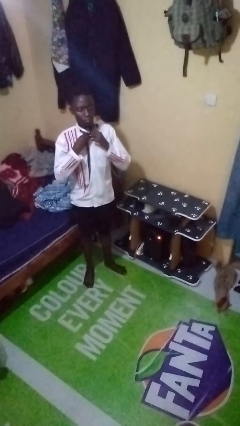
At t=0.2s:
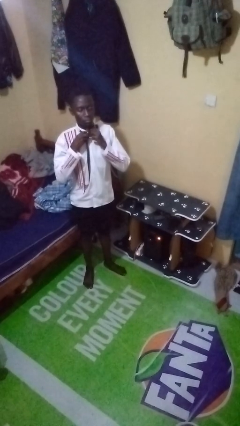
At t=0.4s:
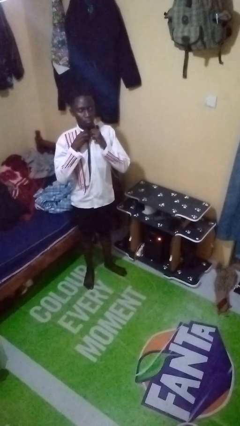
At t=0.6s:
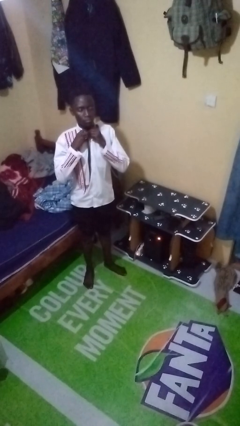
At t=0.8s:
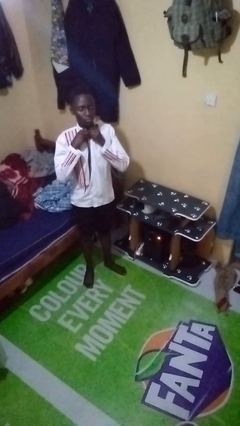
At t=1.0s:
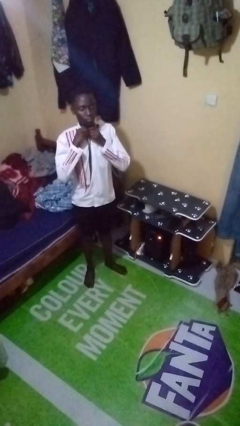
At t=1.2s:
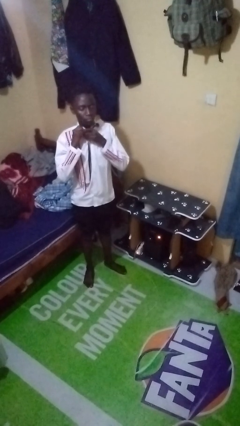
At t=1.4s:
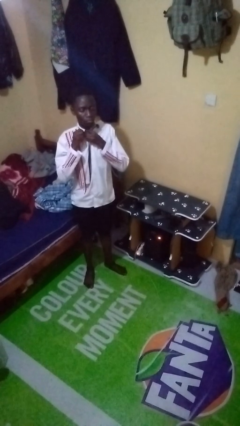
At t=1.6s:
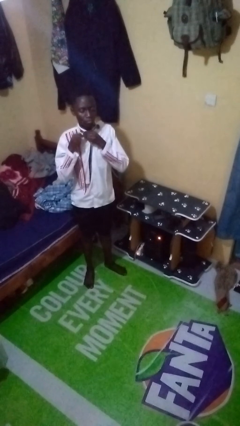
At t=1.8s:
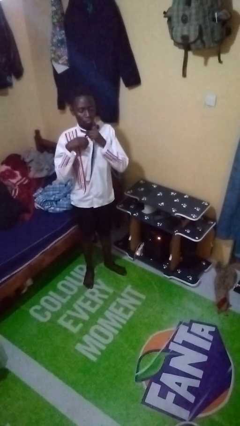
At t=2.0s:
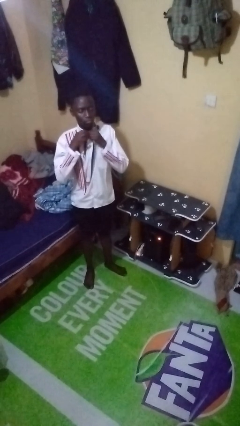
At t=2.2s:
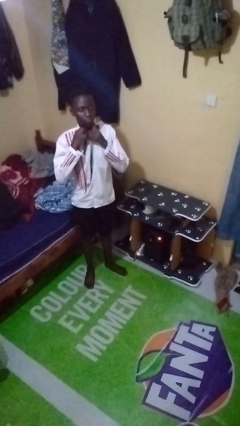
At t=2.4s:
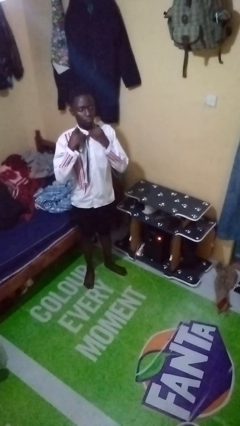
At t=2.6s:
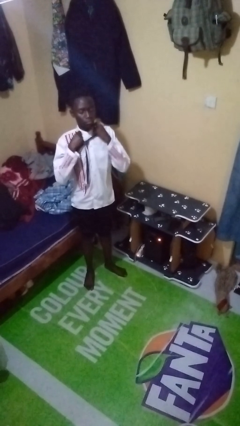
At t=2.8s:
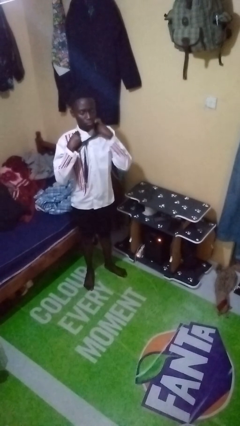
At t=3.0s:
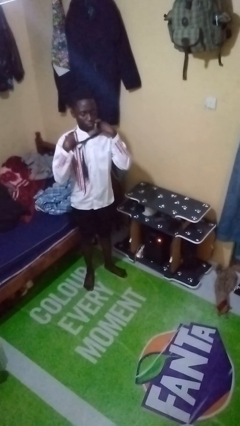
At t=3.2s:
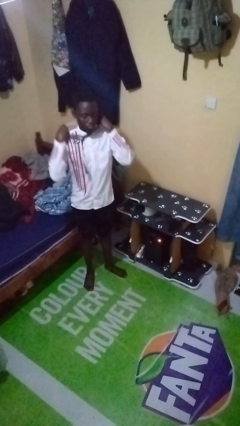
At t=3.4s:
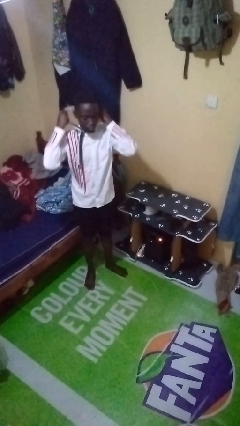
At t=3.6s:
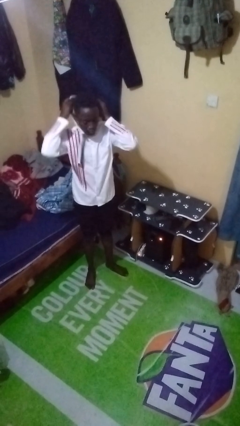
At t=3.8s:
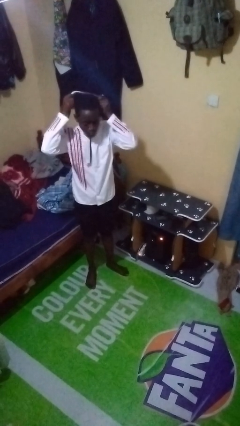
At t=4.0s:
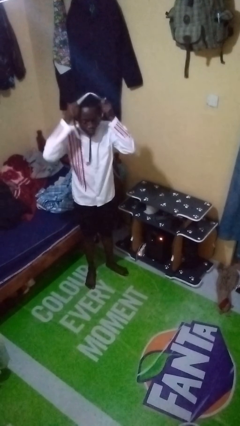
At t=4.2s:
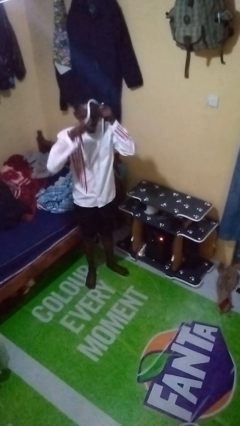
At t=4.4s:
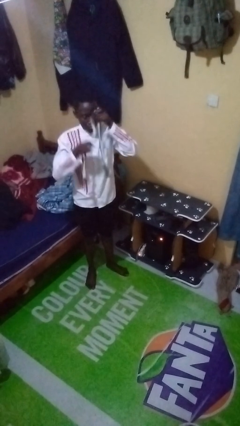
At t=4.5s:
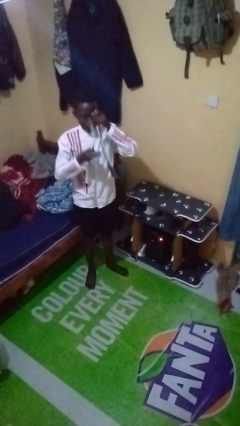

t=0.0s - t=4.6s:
person takes off necktie

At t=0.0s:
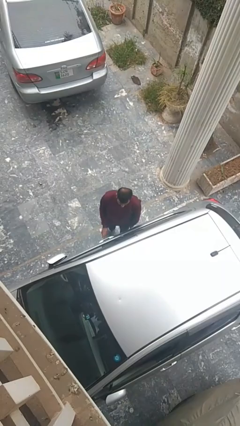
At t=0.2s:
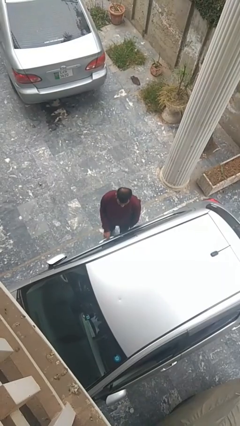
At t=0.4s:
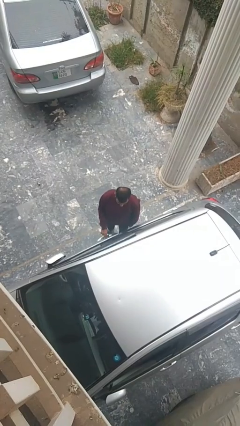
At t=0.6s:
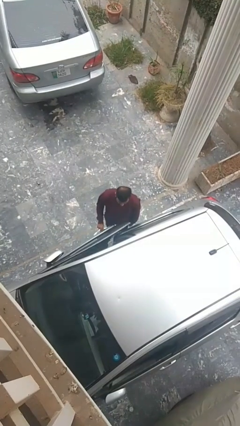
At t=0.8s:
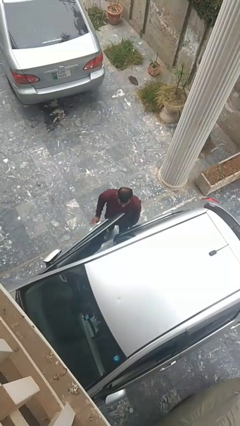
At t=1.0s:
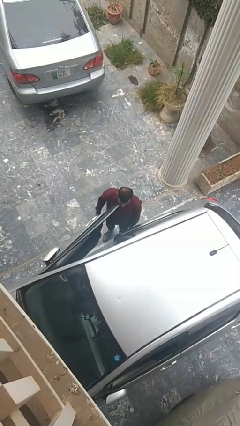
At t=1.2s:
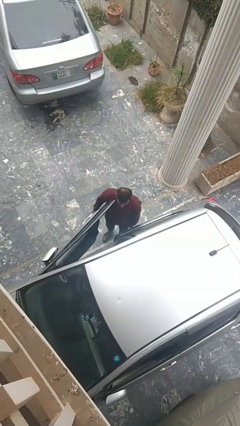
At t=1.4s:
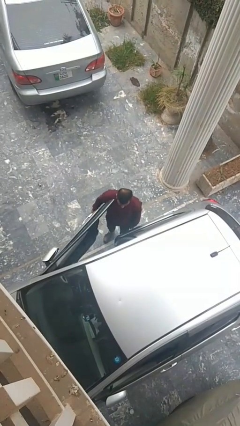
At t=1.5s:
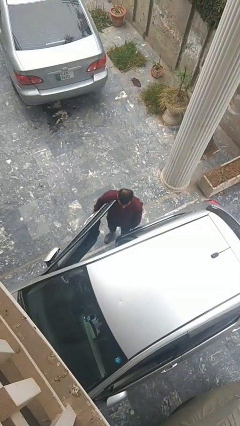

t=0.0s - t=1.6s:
person opens car door

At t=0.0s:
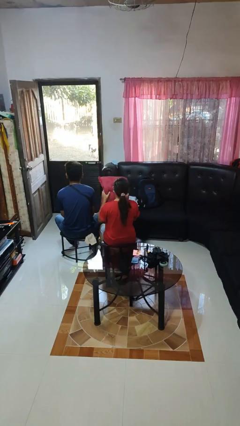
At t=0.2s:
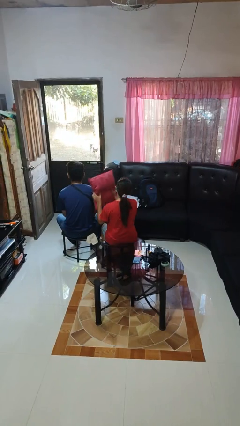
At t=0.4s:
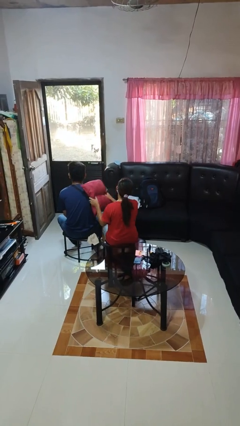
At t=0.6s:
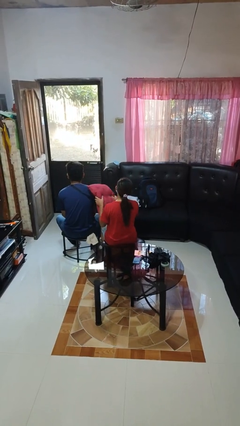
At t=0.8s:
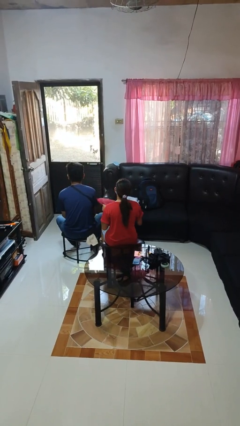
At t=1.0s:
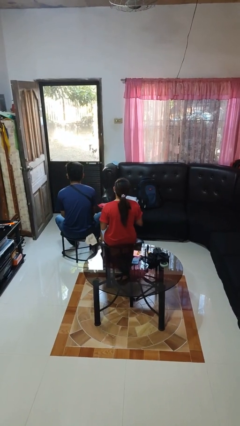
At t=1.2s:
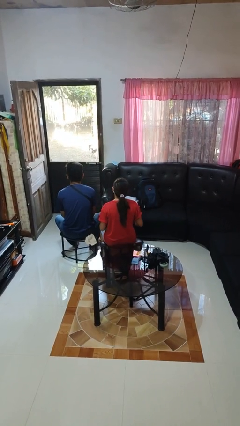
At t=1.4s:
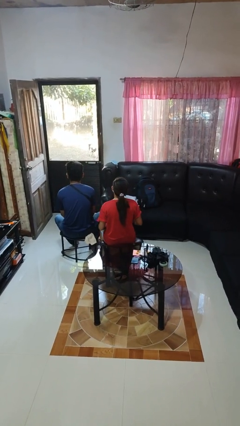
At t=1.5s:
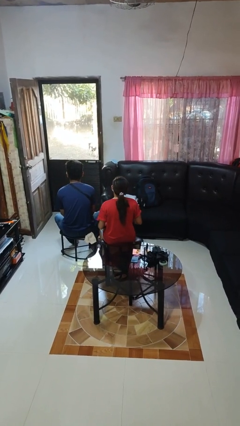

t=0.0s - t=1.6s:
person hits person with pillow

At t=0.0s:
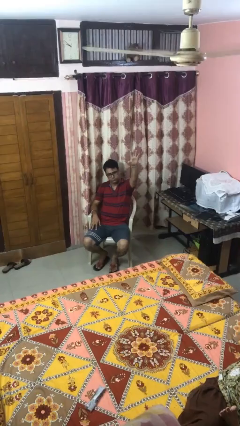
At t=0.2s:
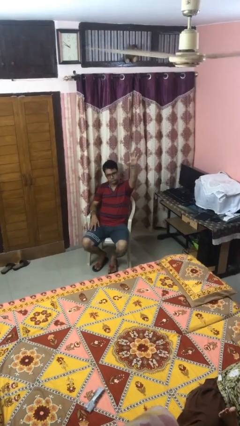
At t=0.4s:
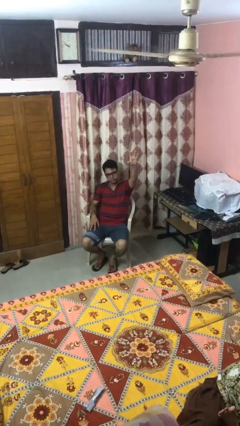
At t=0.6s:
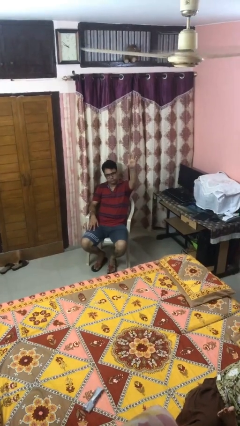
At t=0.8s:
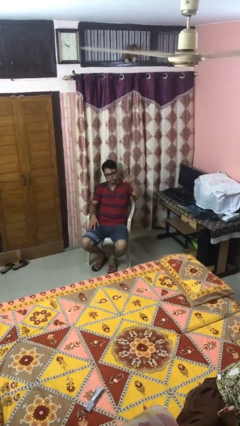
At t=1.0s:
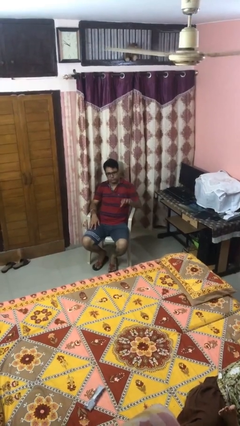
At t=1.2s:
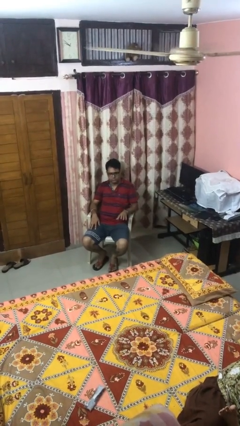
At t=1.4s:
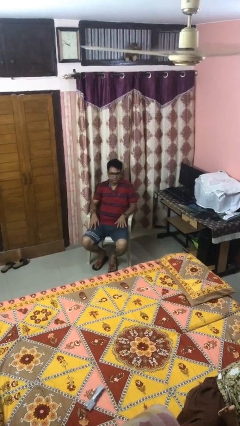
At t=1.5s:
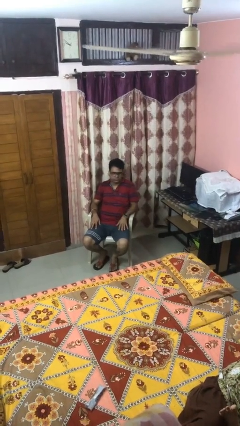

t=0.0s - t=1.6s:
person gestures lower hand

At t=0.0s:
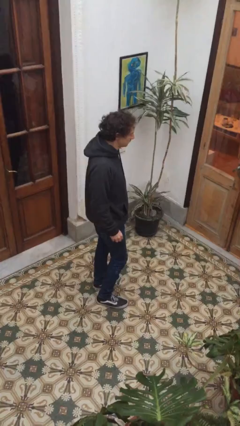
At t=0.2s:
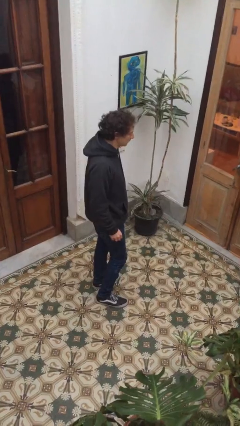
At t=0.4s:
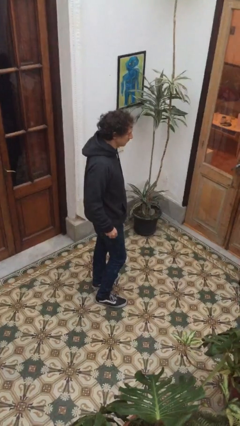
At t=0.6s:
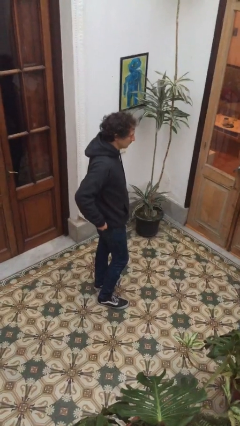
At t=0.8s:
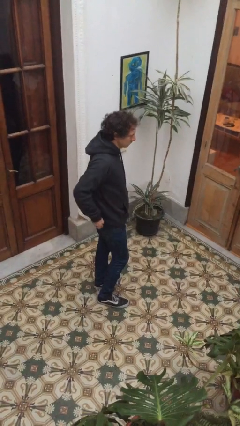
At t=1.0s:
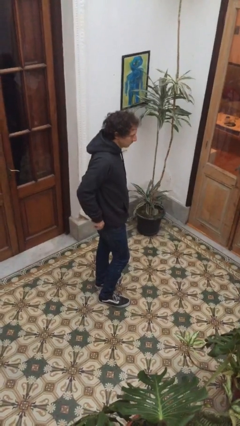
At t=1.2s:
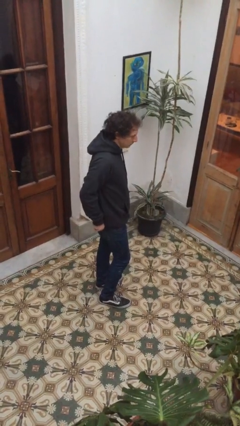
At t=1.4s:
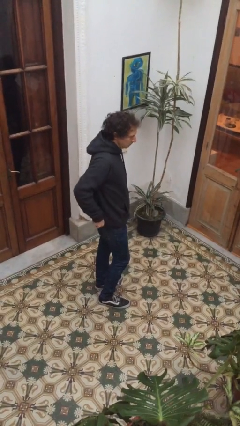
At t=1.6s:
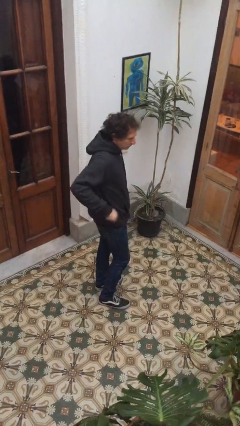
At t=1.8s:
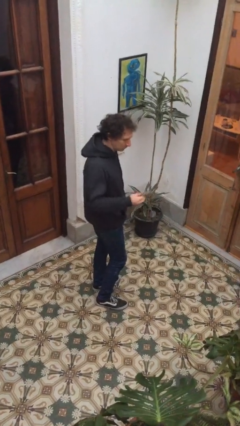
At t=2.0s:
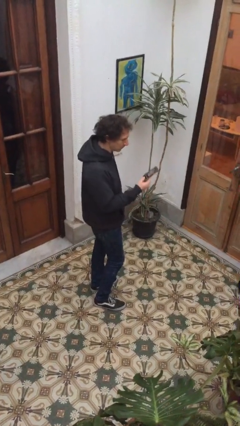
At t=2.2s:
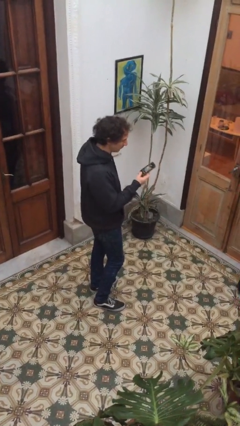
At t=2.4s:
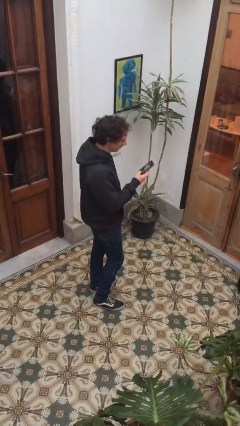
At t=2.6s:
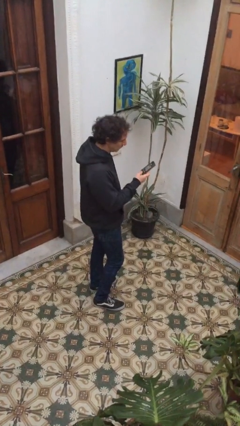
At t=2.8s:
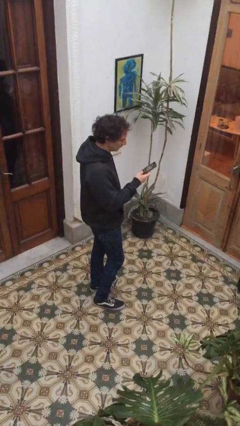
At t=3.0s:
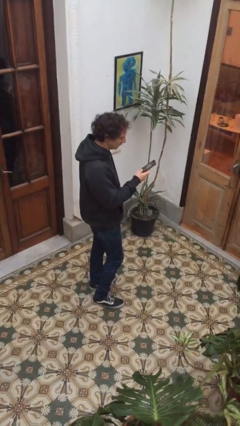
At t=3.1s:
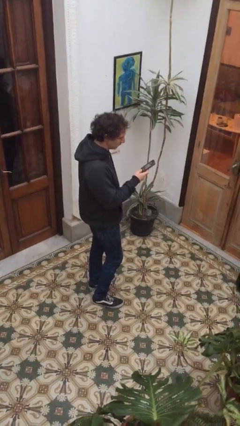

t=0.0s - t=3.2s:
person takes phone from pocket

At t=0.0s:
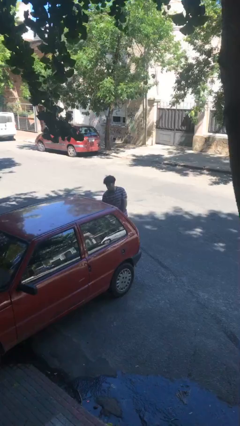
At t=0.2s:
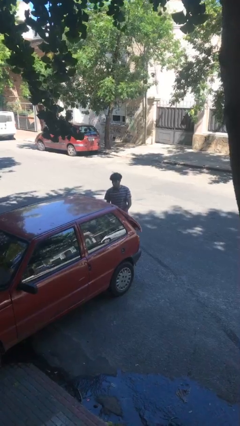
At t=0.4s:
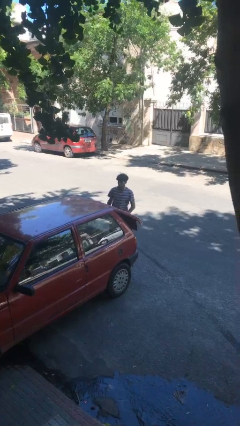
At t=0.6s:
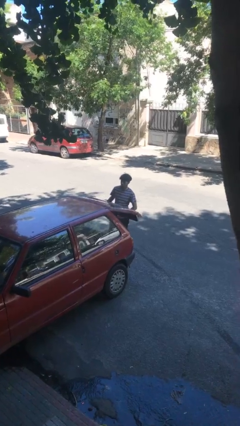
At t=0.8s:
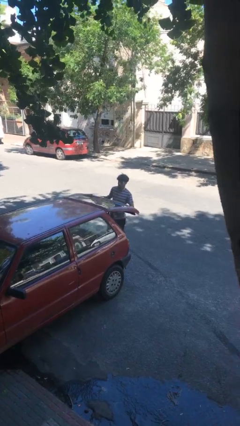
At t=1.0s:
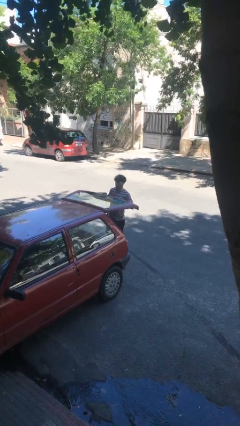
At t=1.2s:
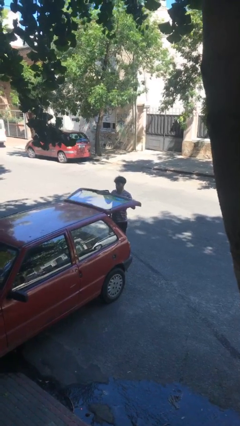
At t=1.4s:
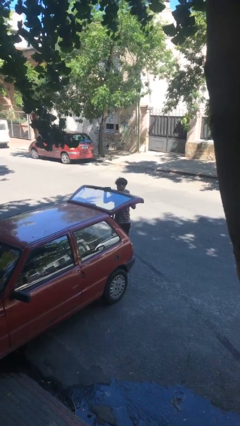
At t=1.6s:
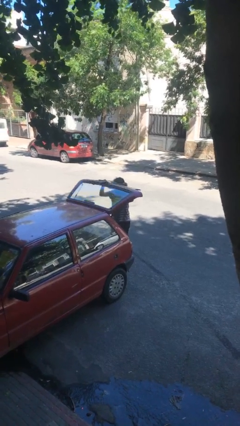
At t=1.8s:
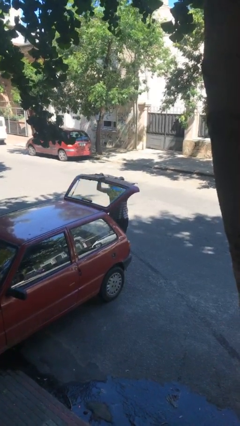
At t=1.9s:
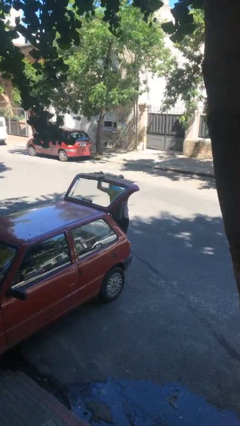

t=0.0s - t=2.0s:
person opens car trunk

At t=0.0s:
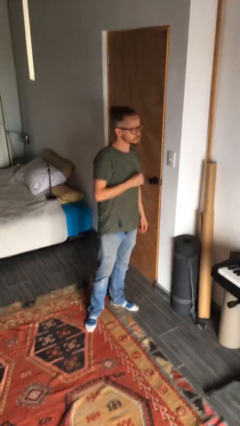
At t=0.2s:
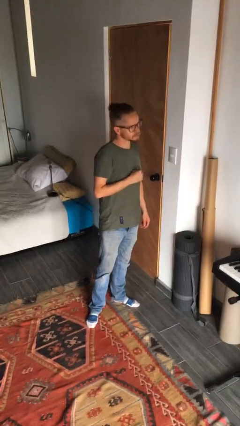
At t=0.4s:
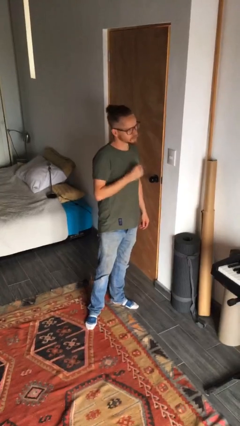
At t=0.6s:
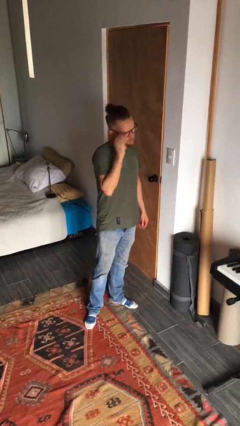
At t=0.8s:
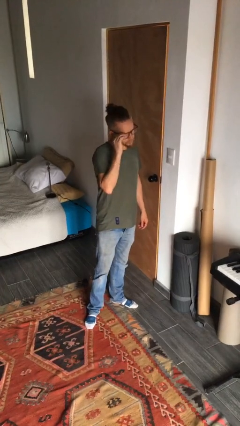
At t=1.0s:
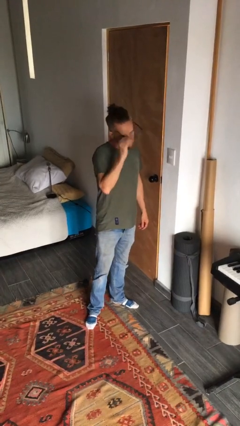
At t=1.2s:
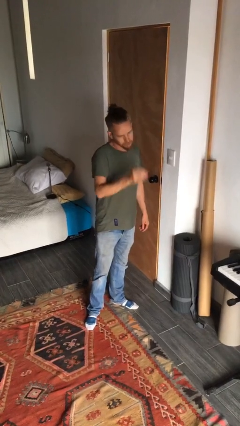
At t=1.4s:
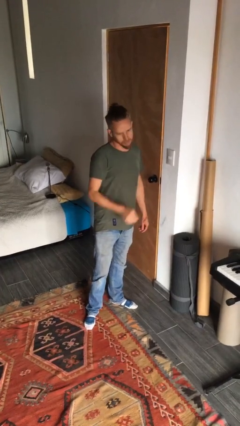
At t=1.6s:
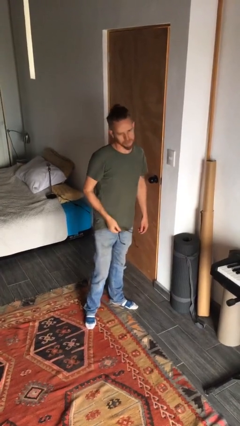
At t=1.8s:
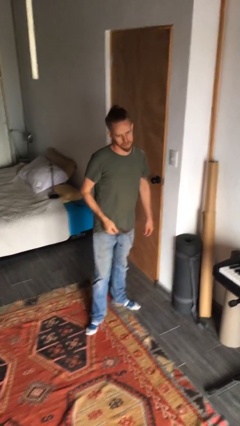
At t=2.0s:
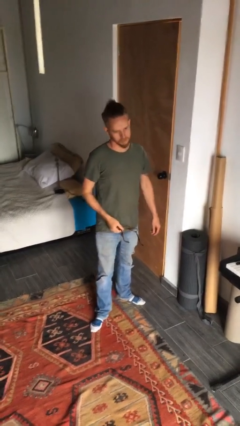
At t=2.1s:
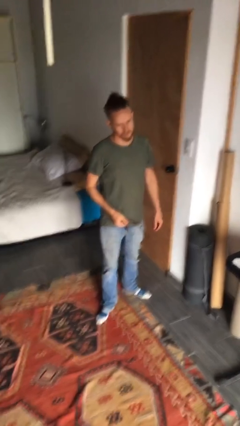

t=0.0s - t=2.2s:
person takes off glasses

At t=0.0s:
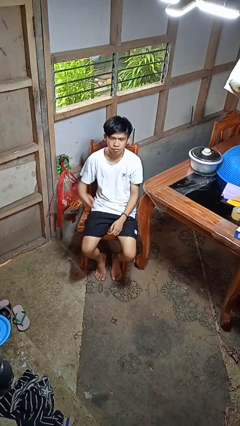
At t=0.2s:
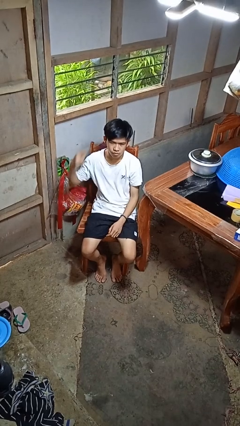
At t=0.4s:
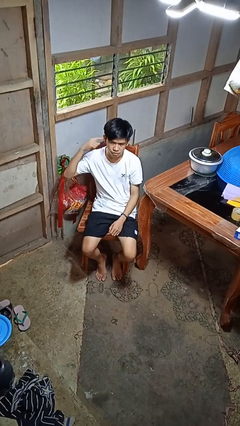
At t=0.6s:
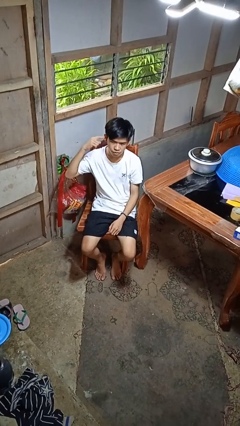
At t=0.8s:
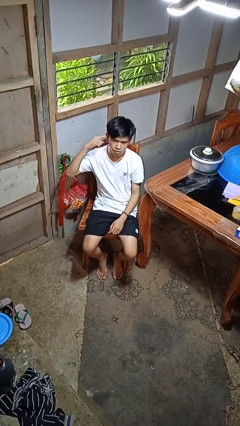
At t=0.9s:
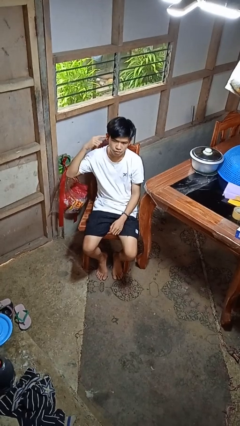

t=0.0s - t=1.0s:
person gestures listen closely
